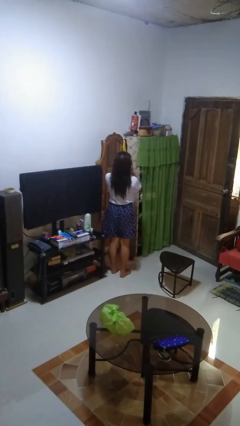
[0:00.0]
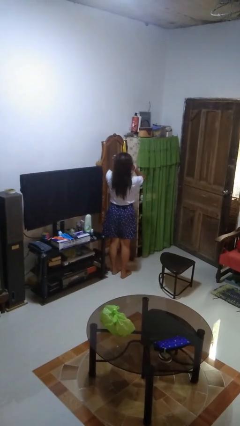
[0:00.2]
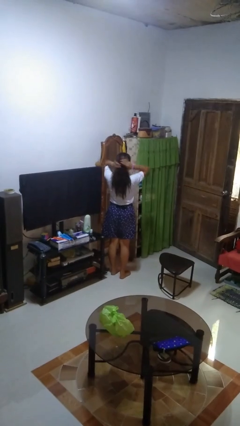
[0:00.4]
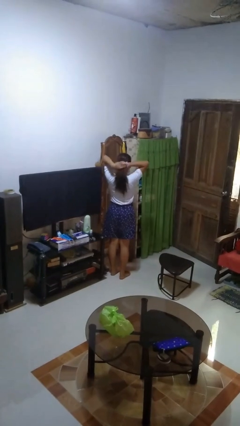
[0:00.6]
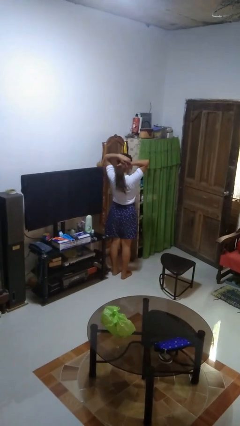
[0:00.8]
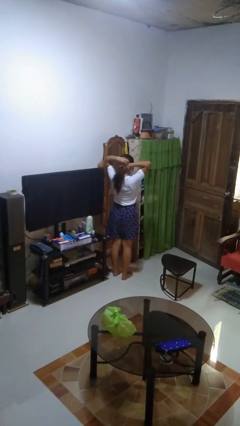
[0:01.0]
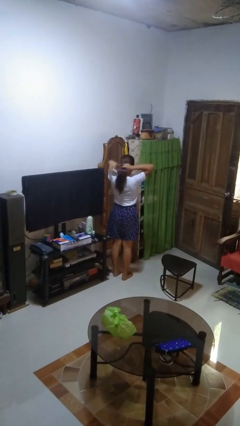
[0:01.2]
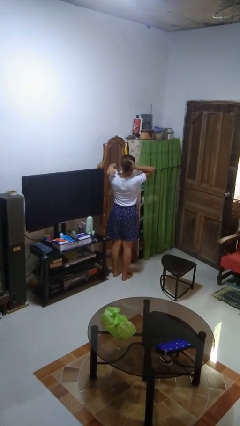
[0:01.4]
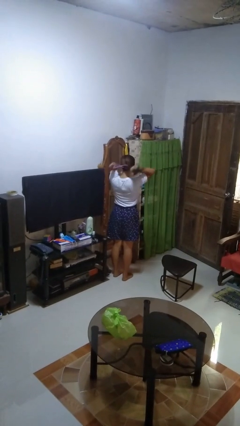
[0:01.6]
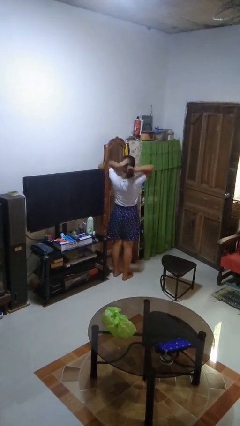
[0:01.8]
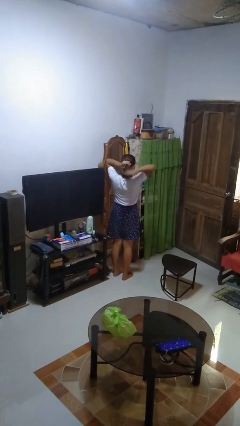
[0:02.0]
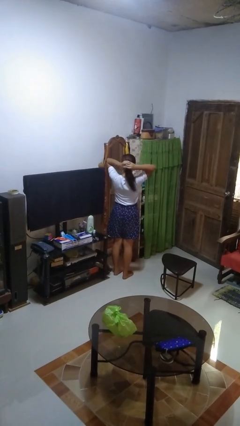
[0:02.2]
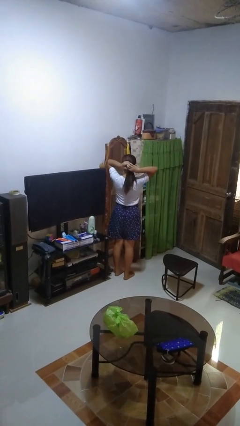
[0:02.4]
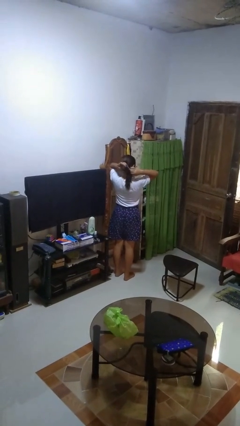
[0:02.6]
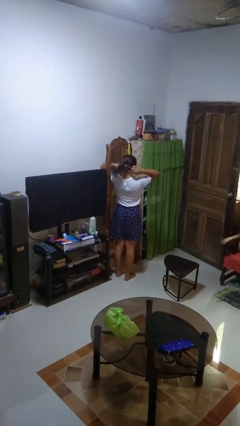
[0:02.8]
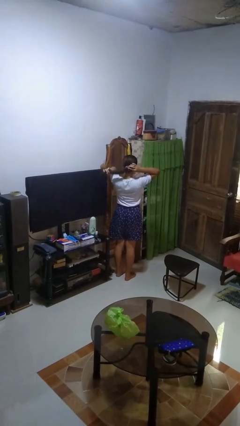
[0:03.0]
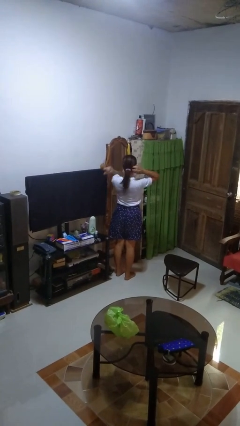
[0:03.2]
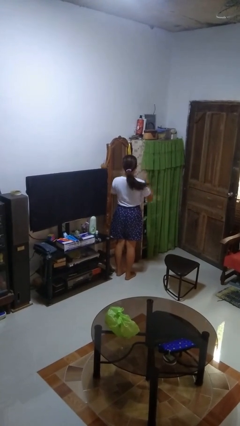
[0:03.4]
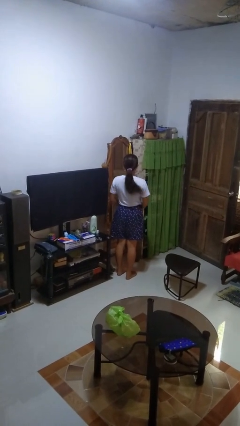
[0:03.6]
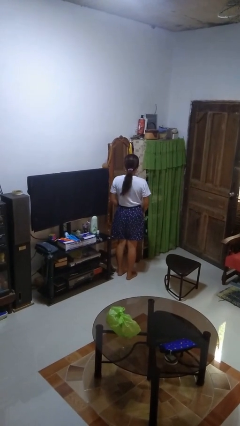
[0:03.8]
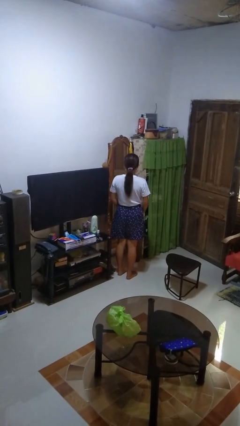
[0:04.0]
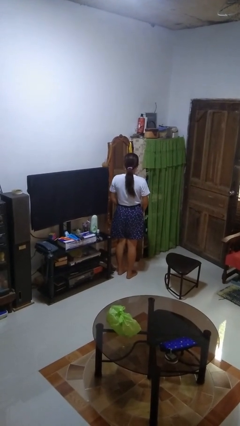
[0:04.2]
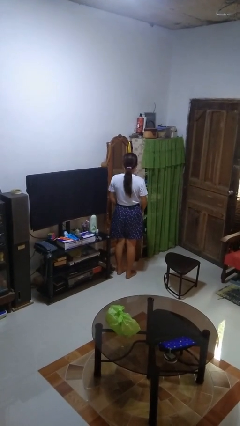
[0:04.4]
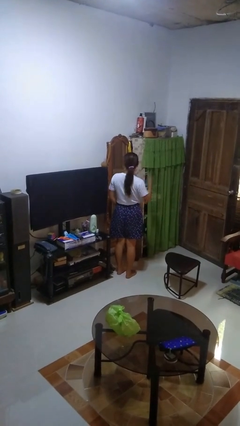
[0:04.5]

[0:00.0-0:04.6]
person puts hair in ponytail

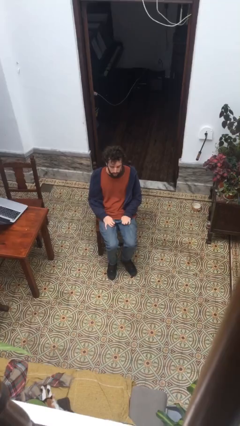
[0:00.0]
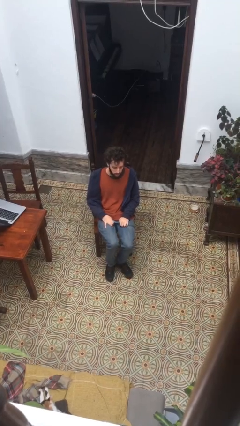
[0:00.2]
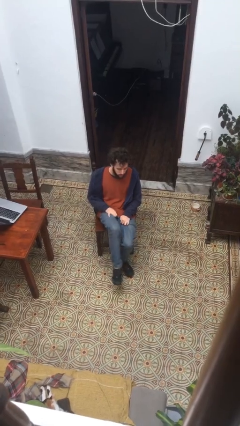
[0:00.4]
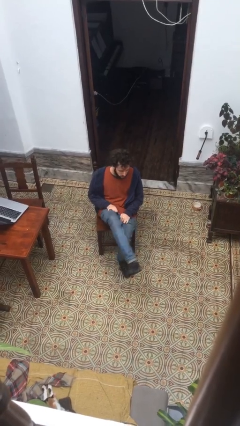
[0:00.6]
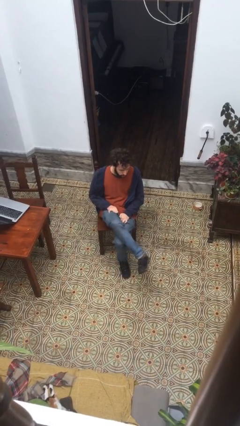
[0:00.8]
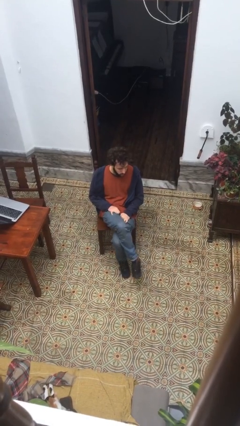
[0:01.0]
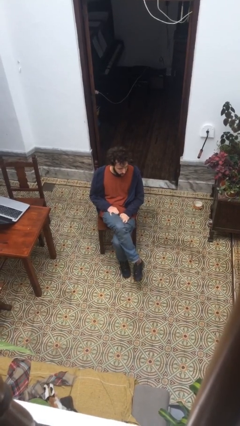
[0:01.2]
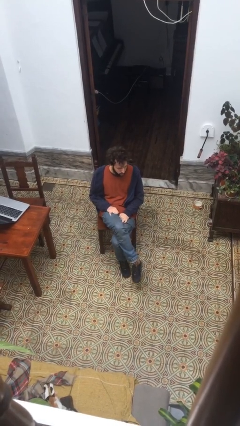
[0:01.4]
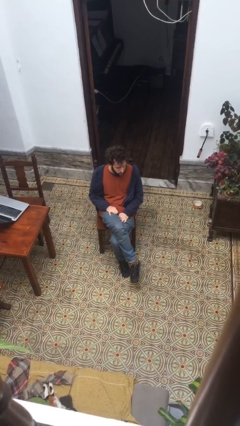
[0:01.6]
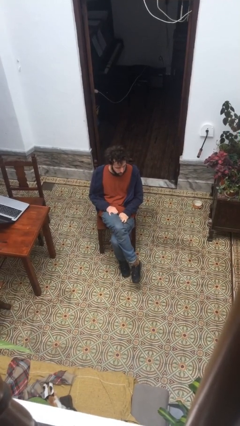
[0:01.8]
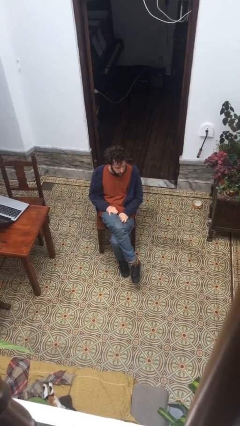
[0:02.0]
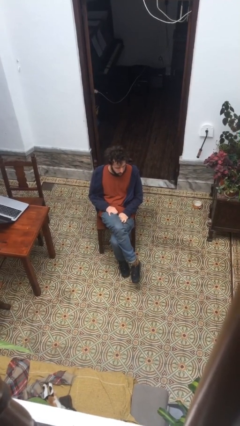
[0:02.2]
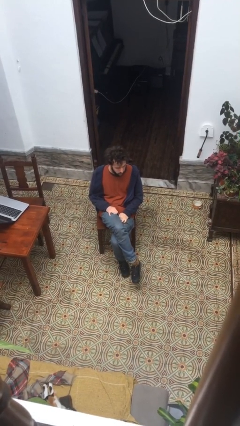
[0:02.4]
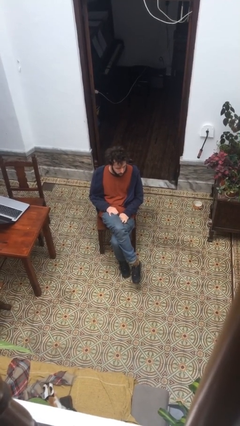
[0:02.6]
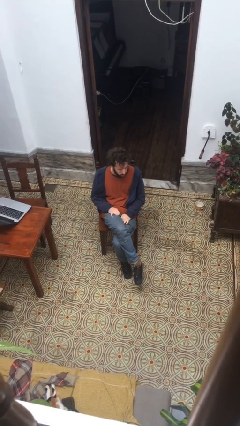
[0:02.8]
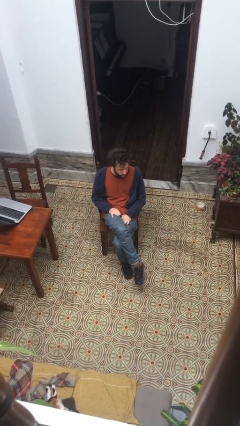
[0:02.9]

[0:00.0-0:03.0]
person crosses legs

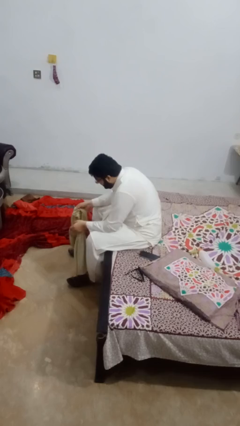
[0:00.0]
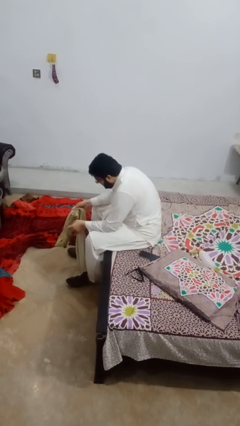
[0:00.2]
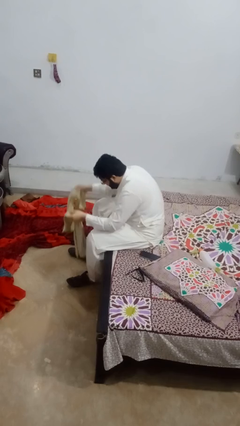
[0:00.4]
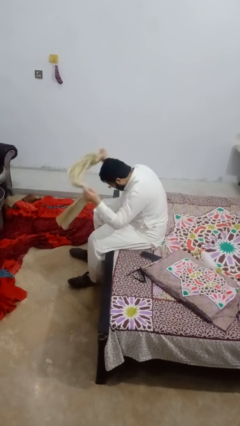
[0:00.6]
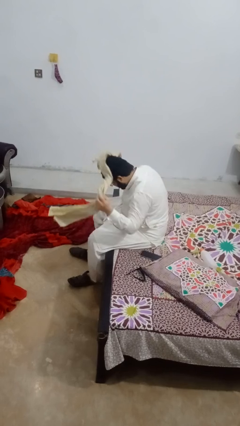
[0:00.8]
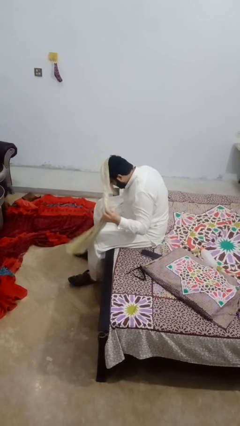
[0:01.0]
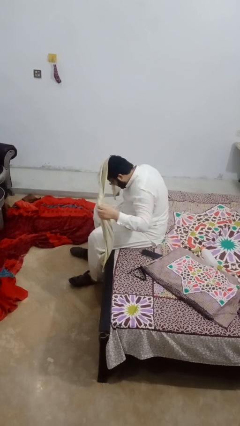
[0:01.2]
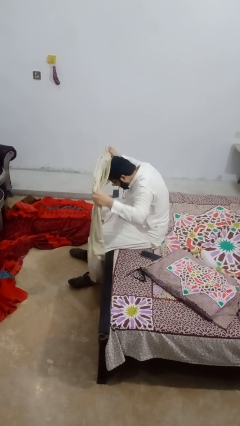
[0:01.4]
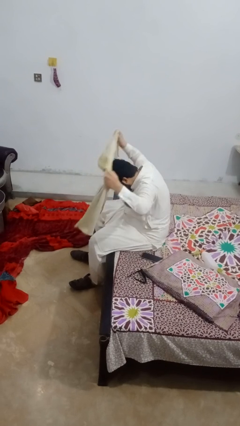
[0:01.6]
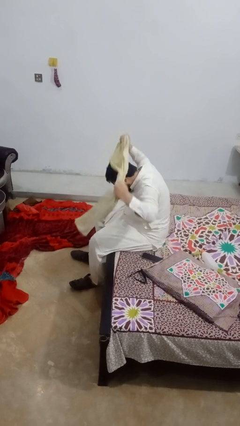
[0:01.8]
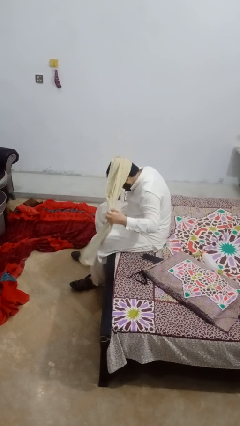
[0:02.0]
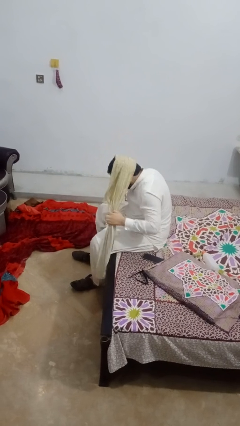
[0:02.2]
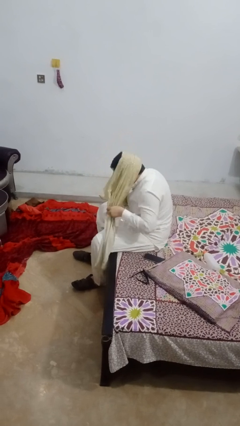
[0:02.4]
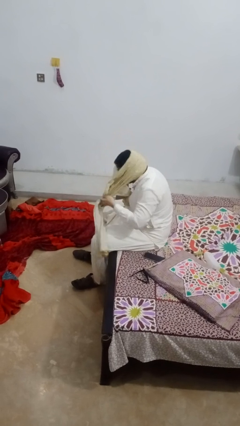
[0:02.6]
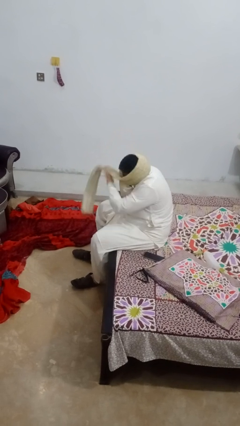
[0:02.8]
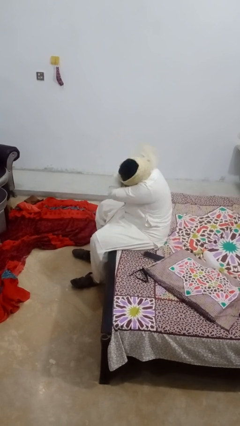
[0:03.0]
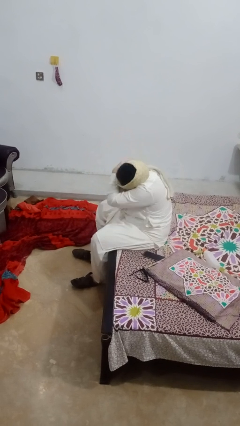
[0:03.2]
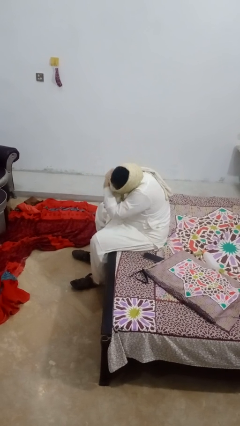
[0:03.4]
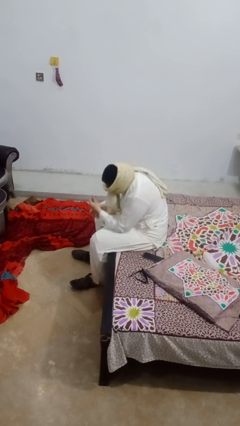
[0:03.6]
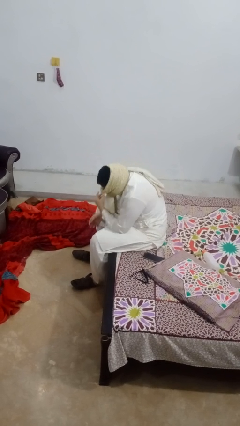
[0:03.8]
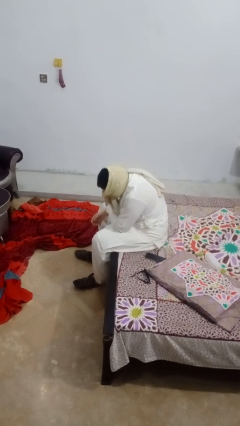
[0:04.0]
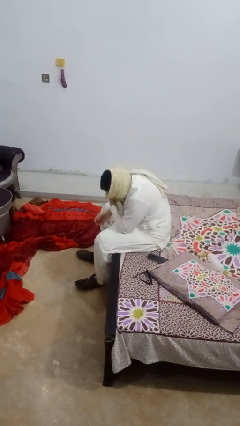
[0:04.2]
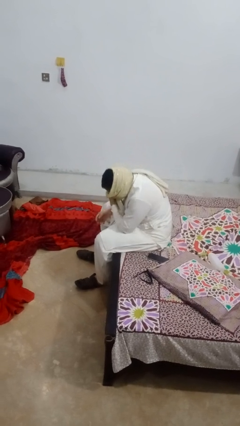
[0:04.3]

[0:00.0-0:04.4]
person puts on scarf

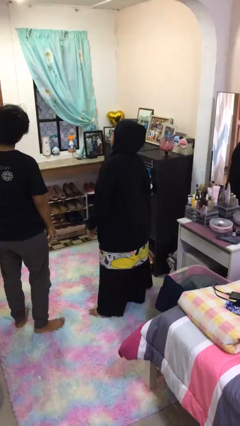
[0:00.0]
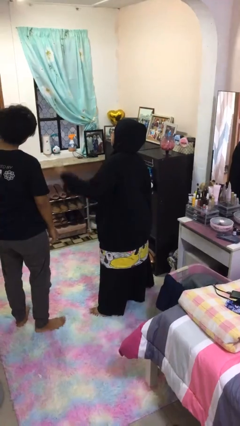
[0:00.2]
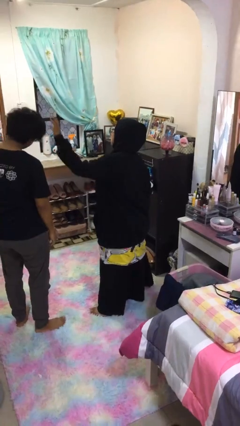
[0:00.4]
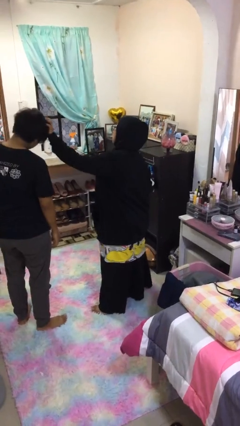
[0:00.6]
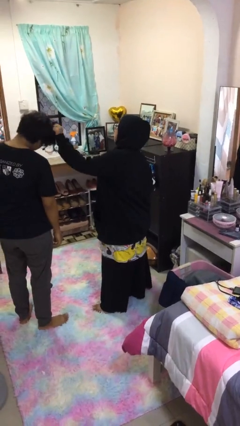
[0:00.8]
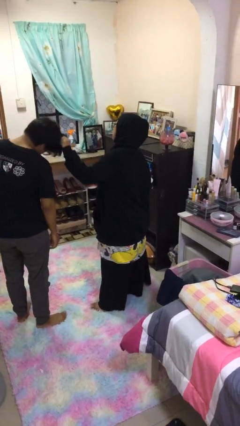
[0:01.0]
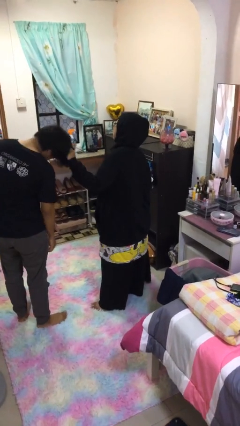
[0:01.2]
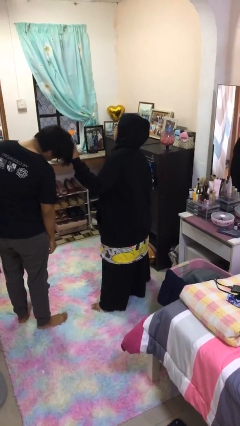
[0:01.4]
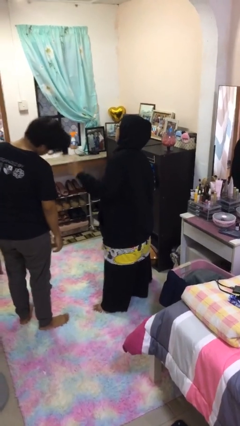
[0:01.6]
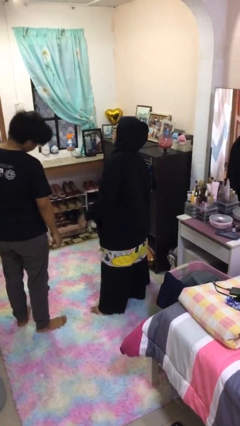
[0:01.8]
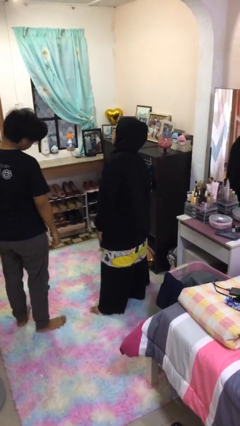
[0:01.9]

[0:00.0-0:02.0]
person grabs person by hair

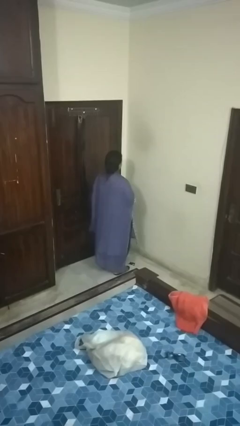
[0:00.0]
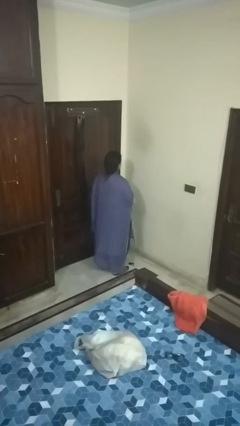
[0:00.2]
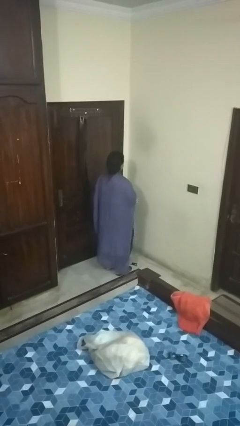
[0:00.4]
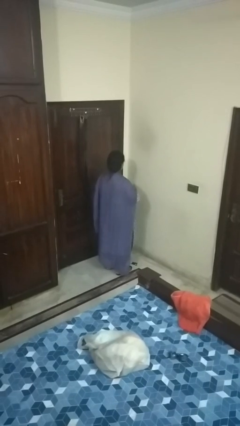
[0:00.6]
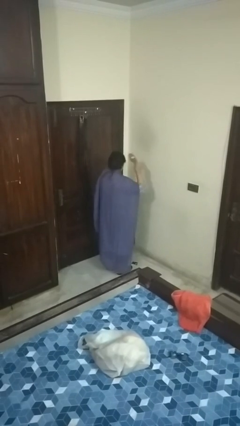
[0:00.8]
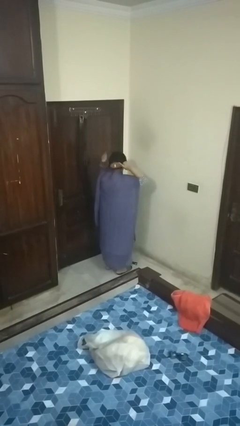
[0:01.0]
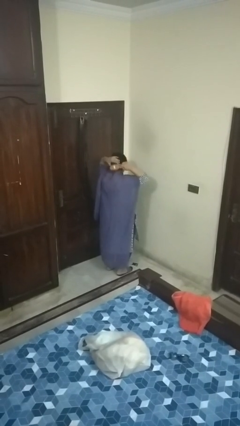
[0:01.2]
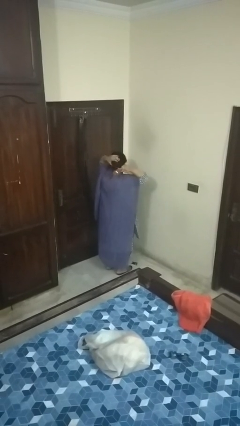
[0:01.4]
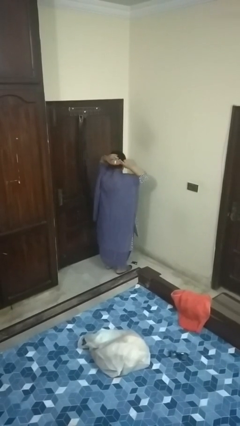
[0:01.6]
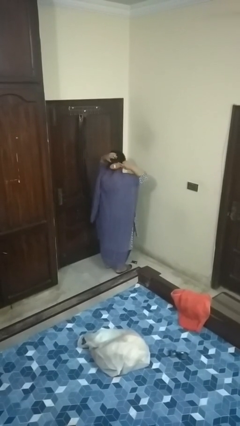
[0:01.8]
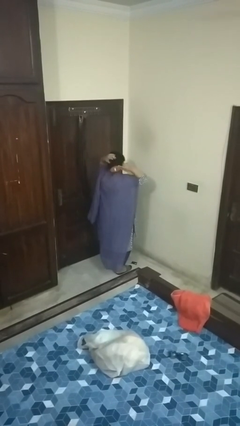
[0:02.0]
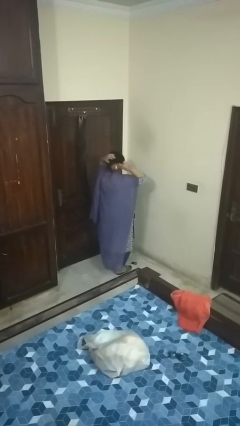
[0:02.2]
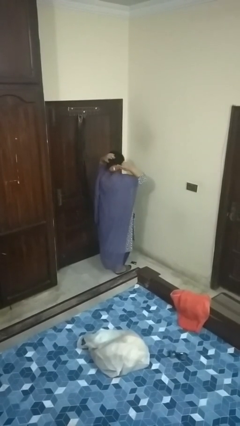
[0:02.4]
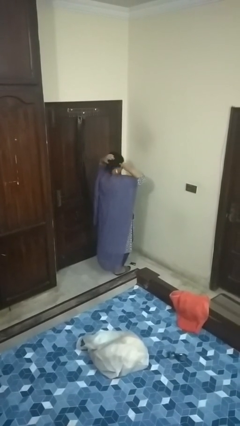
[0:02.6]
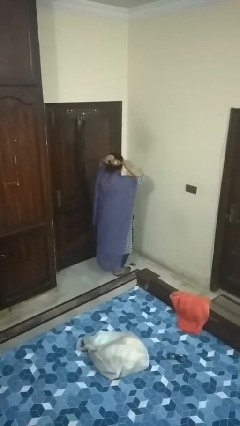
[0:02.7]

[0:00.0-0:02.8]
person brushes hair

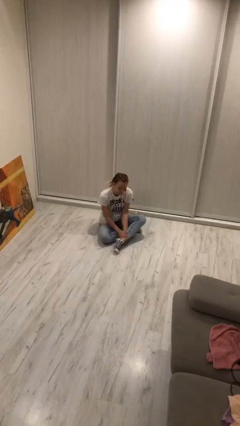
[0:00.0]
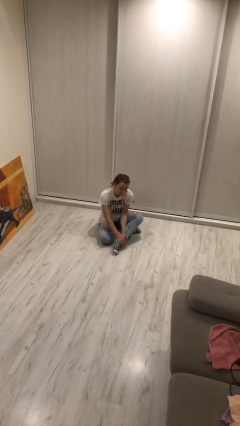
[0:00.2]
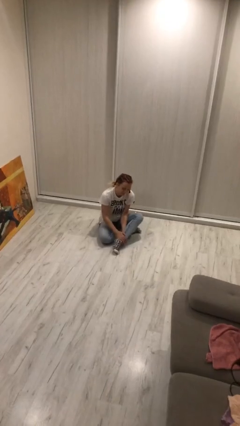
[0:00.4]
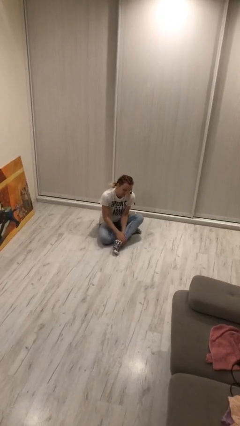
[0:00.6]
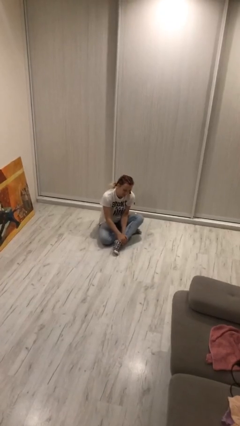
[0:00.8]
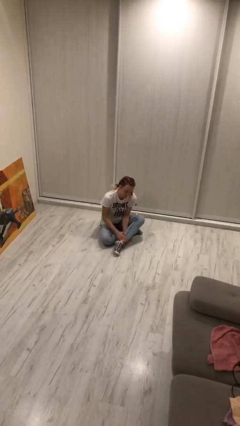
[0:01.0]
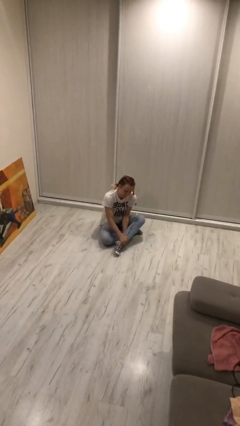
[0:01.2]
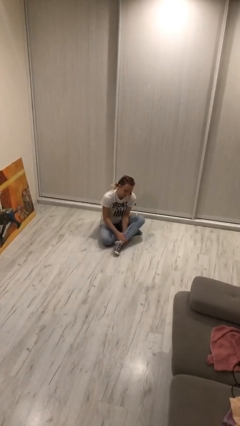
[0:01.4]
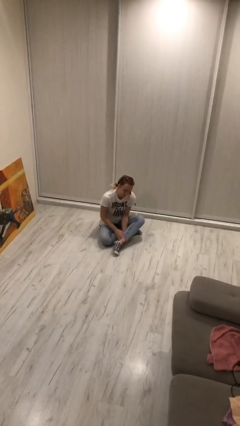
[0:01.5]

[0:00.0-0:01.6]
person rubs foot
